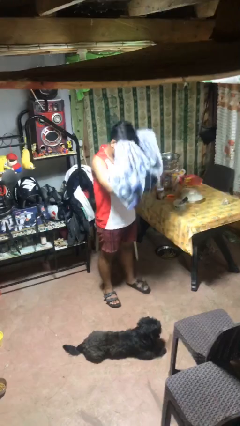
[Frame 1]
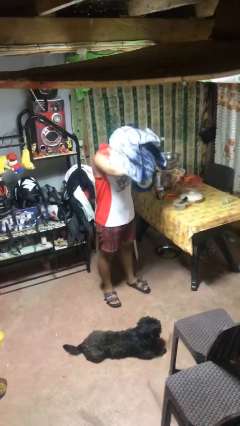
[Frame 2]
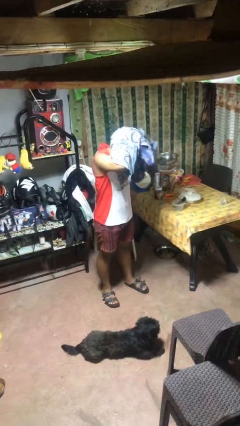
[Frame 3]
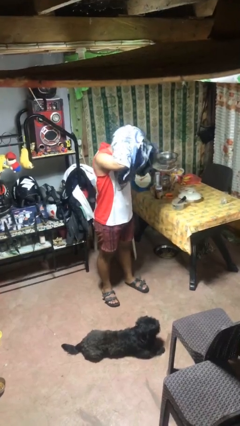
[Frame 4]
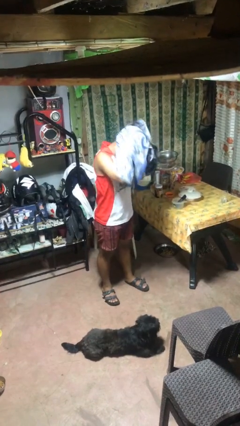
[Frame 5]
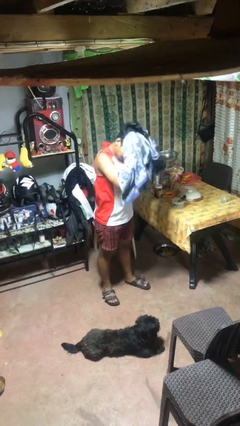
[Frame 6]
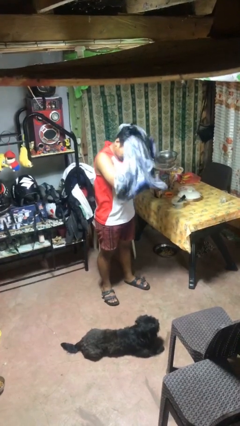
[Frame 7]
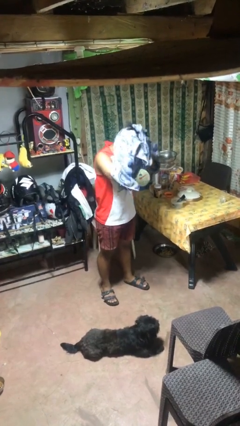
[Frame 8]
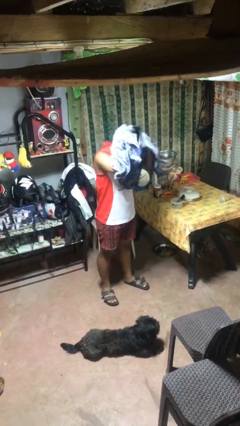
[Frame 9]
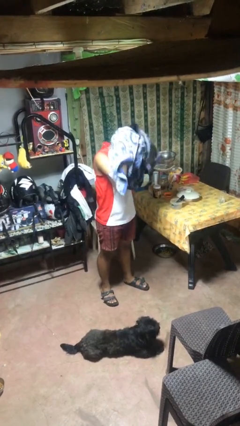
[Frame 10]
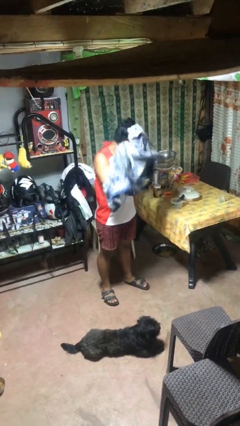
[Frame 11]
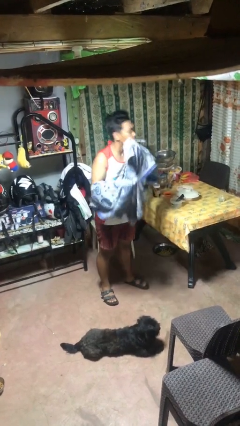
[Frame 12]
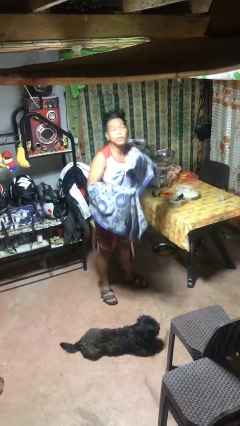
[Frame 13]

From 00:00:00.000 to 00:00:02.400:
person dries hair with towel

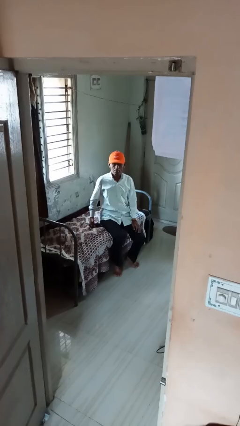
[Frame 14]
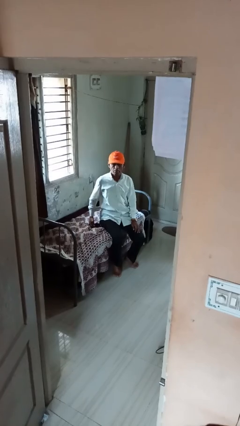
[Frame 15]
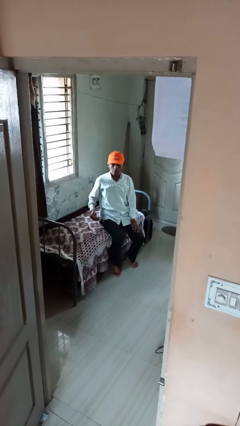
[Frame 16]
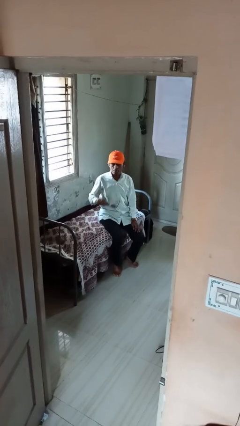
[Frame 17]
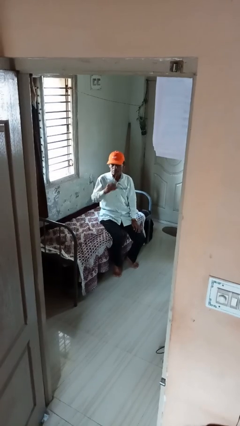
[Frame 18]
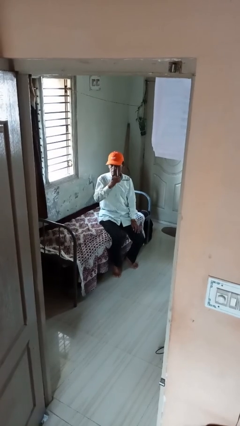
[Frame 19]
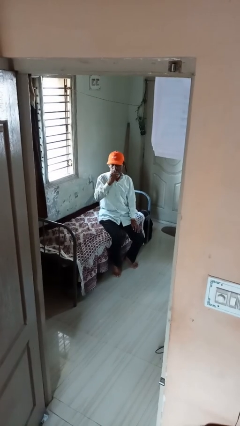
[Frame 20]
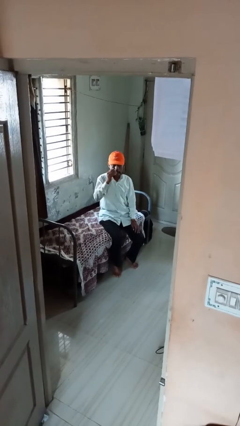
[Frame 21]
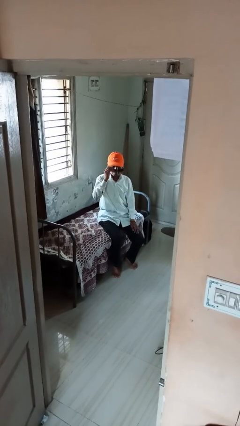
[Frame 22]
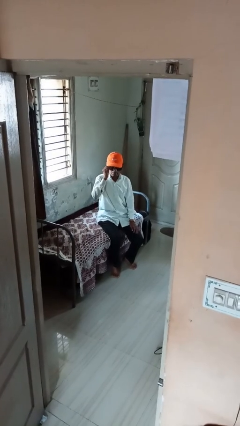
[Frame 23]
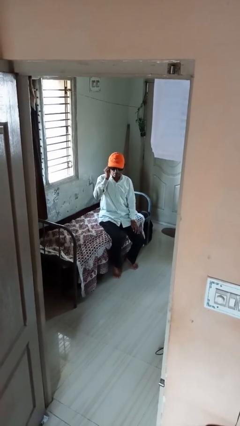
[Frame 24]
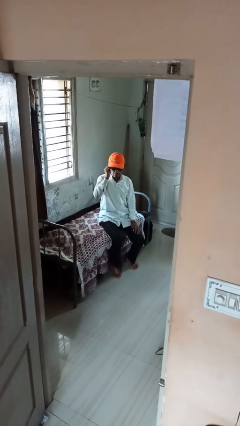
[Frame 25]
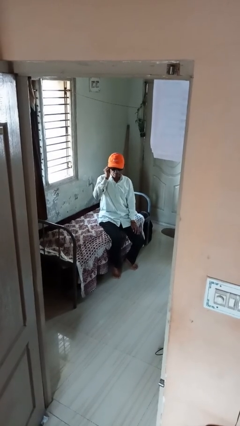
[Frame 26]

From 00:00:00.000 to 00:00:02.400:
person puts on sunglasses

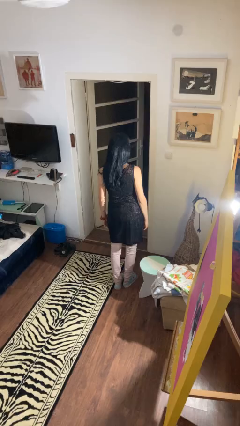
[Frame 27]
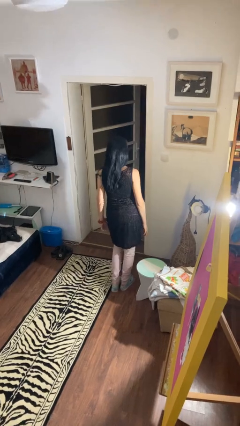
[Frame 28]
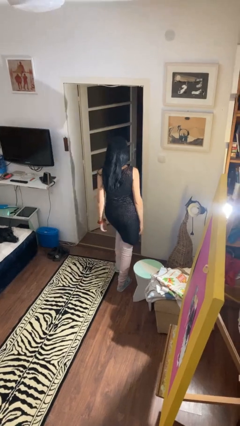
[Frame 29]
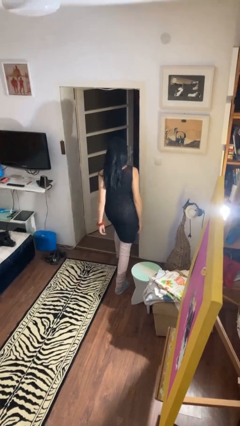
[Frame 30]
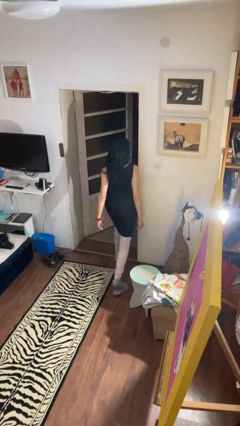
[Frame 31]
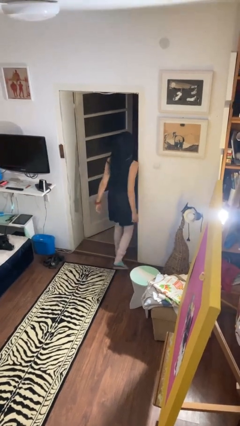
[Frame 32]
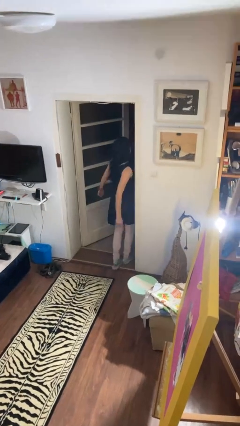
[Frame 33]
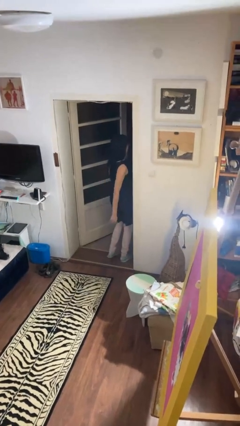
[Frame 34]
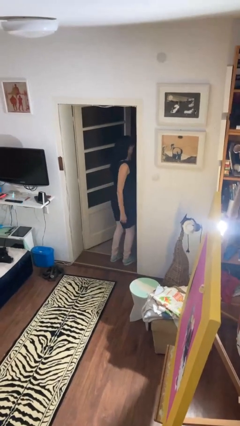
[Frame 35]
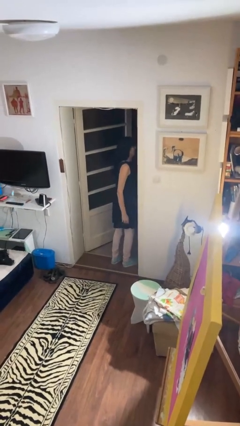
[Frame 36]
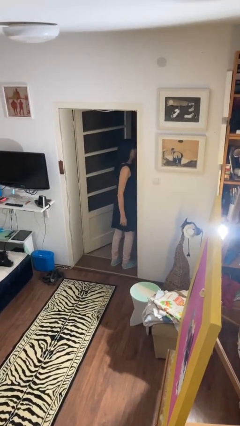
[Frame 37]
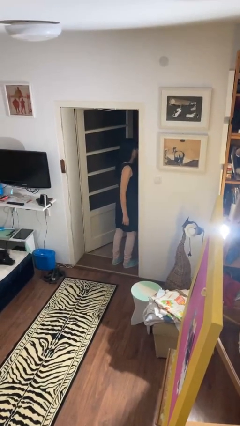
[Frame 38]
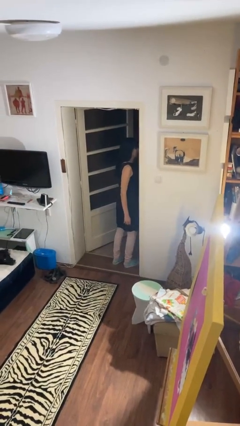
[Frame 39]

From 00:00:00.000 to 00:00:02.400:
person bumps into wall

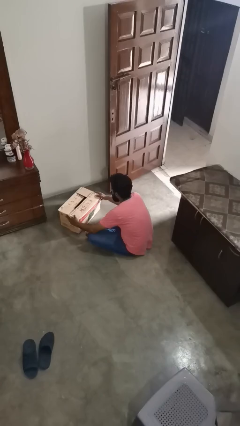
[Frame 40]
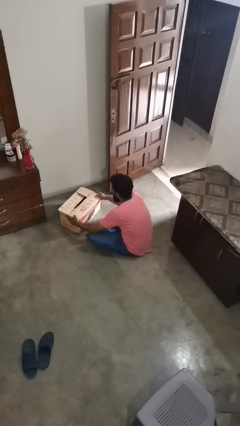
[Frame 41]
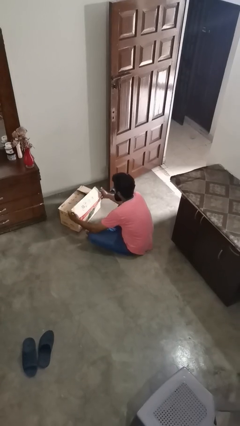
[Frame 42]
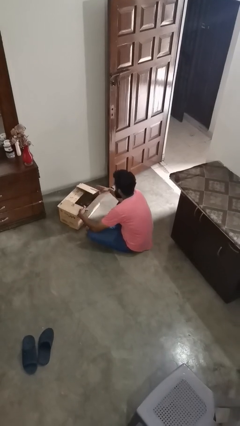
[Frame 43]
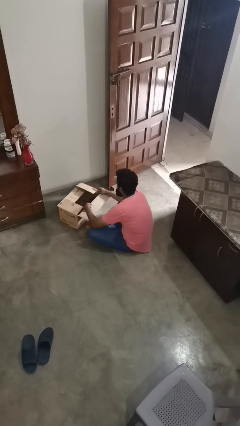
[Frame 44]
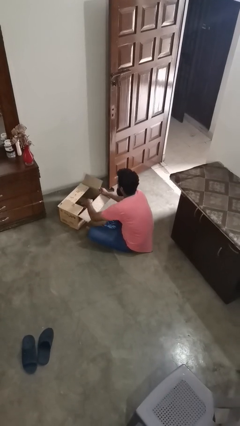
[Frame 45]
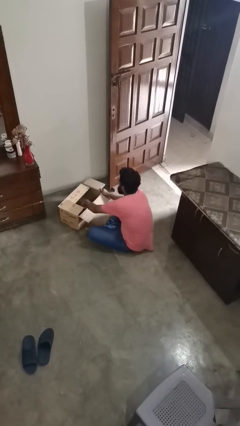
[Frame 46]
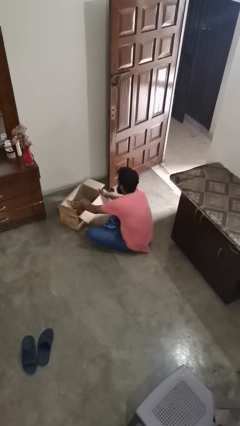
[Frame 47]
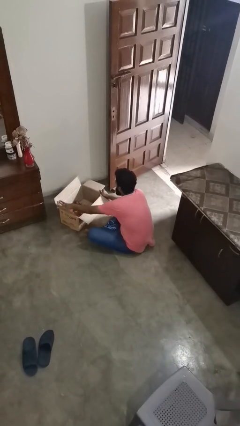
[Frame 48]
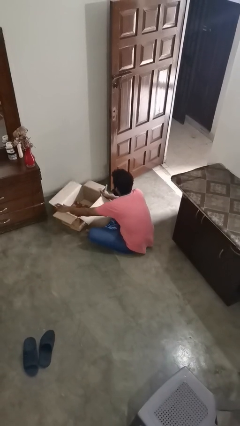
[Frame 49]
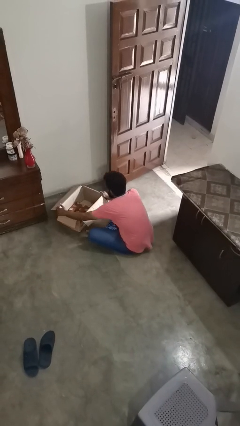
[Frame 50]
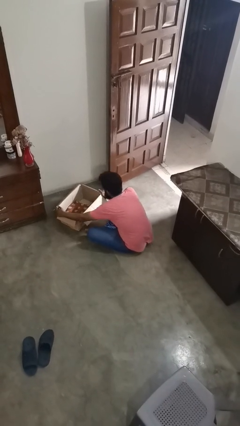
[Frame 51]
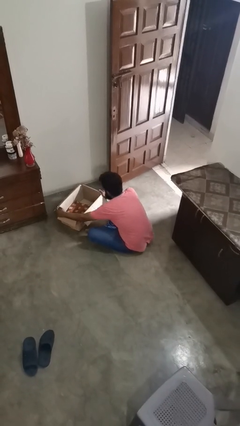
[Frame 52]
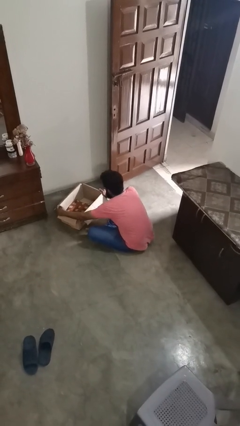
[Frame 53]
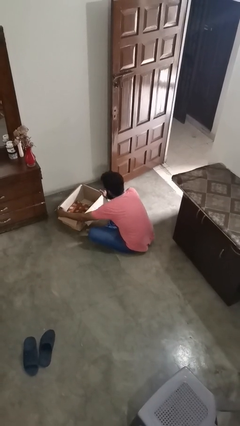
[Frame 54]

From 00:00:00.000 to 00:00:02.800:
person opens box

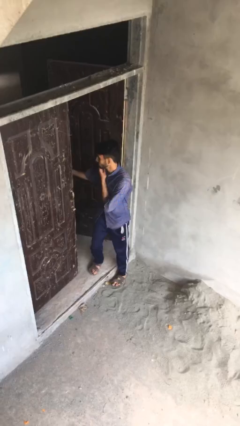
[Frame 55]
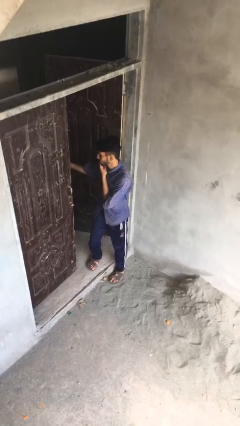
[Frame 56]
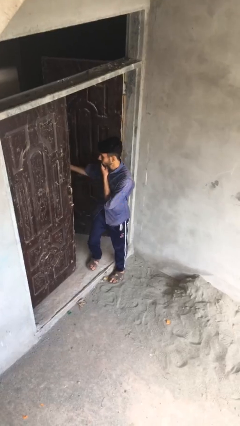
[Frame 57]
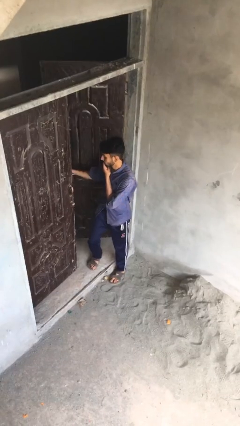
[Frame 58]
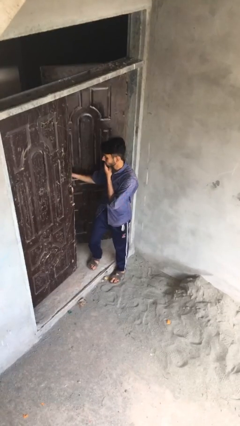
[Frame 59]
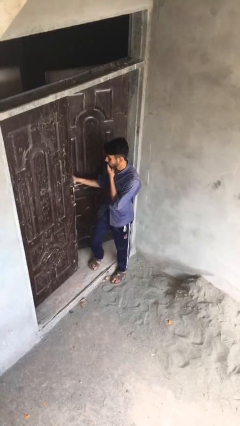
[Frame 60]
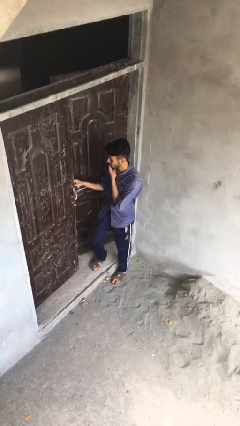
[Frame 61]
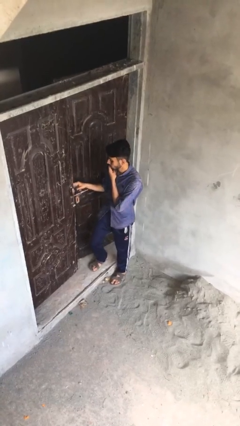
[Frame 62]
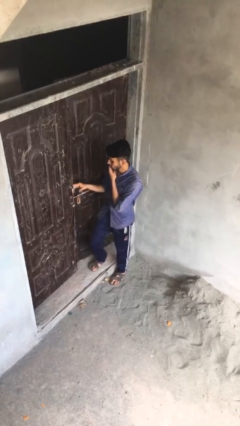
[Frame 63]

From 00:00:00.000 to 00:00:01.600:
person closes facility door

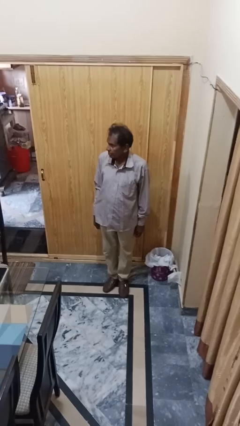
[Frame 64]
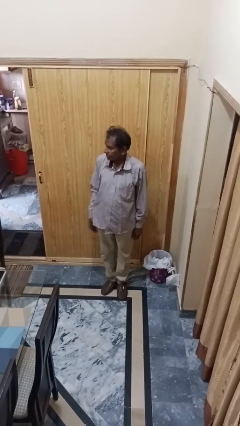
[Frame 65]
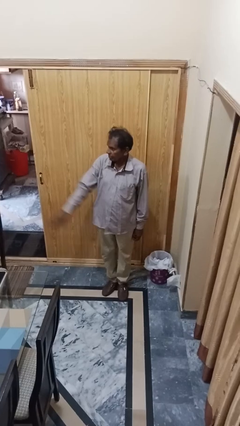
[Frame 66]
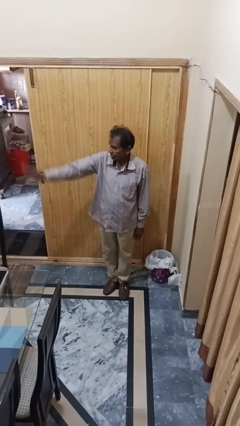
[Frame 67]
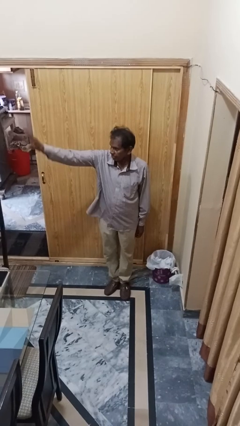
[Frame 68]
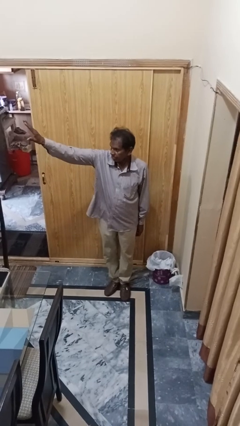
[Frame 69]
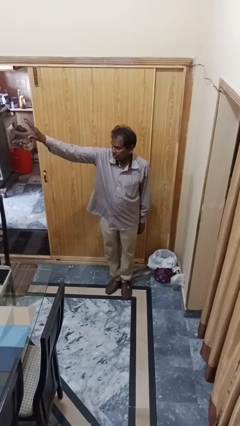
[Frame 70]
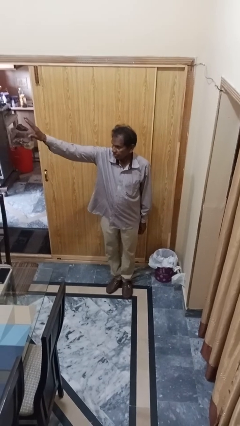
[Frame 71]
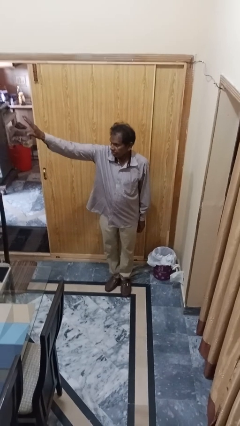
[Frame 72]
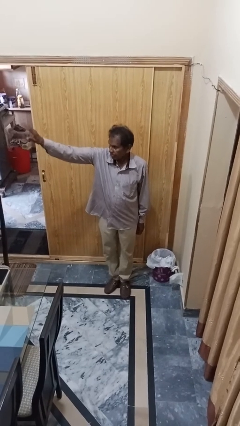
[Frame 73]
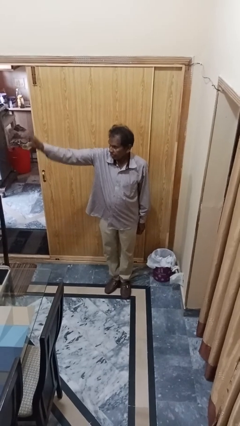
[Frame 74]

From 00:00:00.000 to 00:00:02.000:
person gestures raise hand

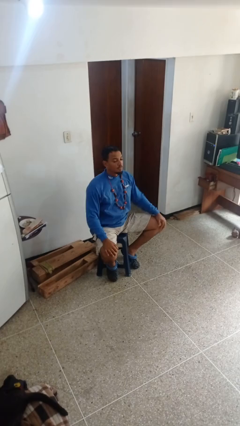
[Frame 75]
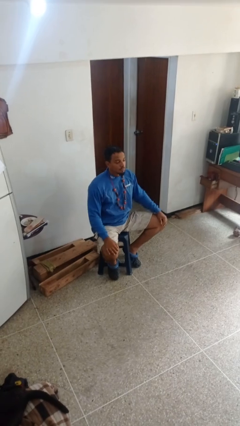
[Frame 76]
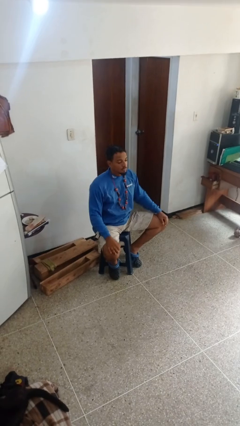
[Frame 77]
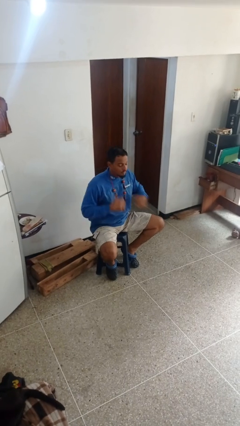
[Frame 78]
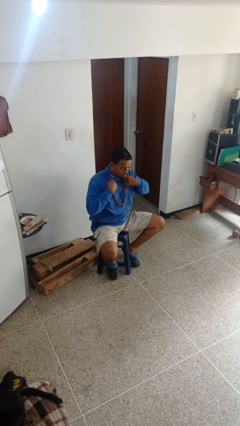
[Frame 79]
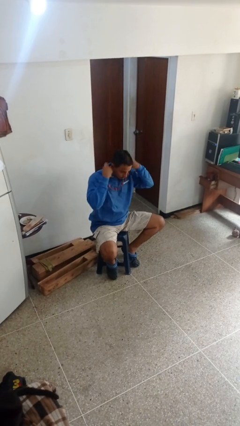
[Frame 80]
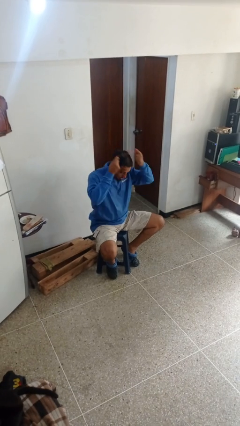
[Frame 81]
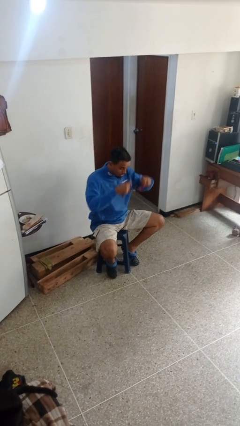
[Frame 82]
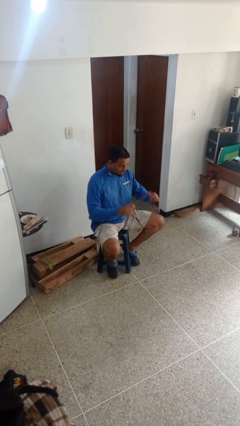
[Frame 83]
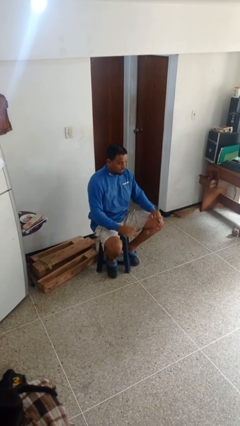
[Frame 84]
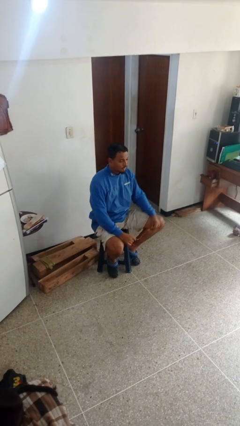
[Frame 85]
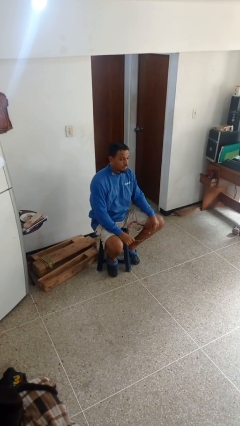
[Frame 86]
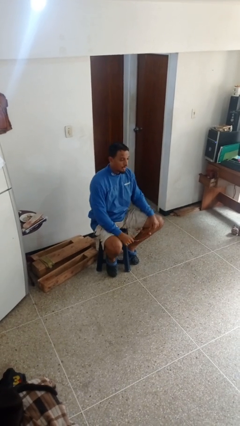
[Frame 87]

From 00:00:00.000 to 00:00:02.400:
person takes off necklace

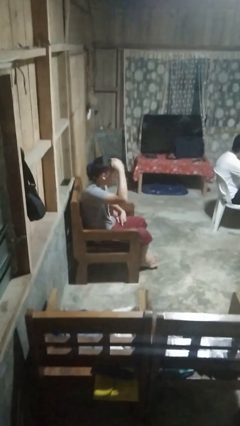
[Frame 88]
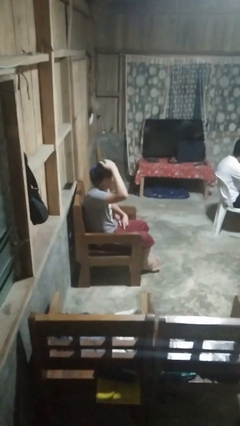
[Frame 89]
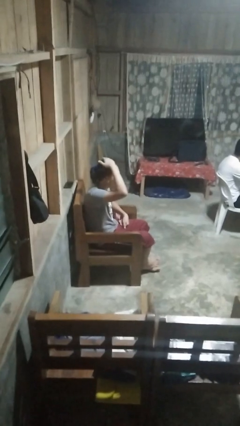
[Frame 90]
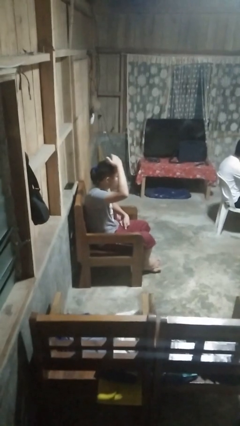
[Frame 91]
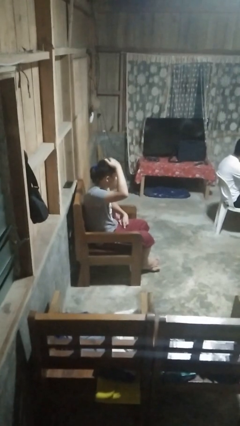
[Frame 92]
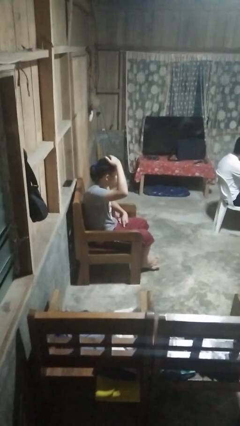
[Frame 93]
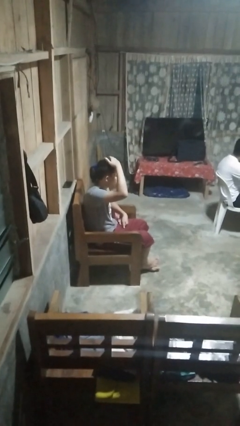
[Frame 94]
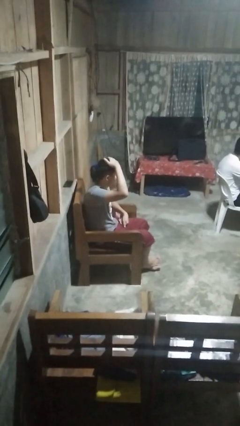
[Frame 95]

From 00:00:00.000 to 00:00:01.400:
person pats head
